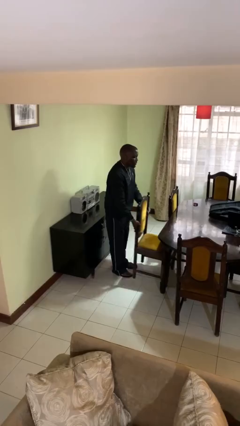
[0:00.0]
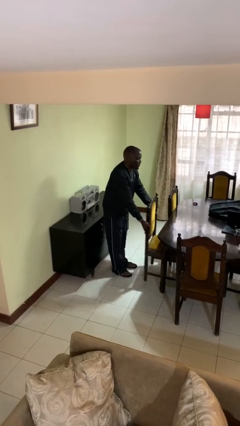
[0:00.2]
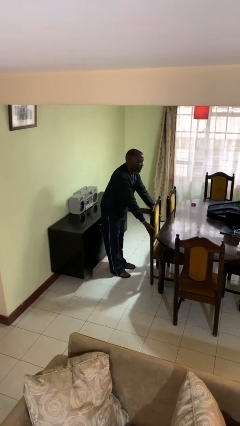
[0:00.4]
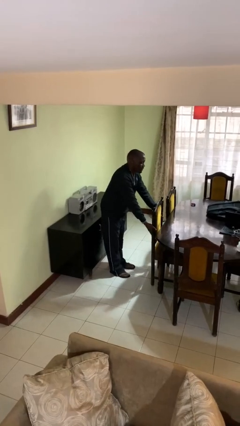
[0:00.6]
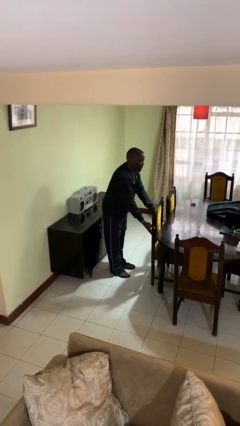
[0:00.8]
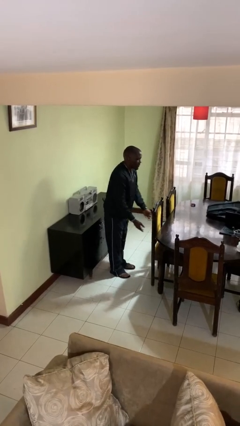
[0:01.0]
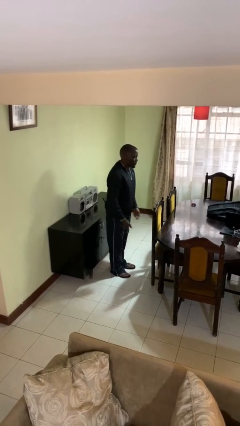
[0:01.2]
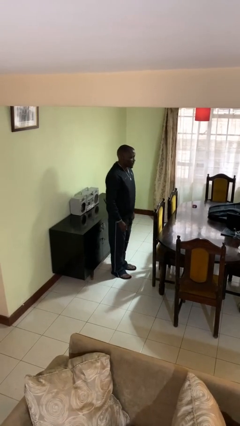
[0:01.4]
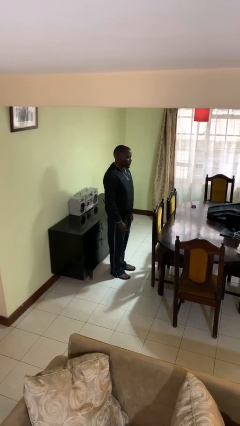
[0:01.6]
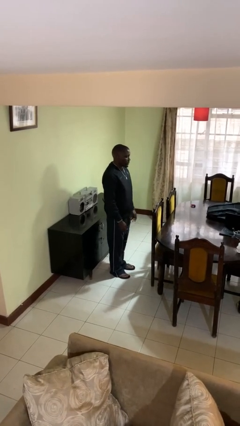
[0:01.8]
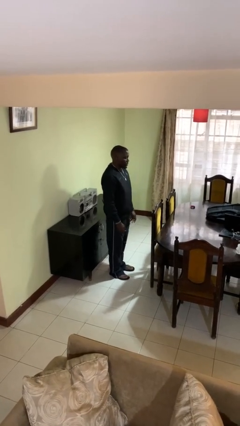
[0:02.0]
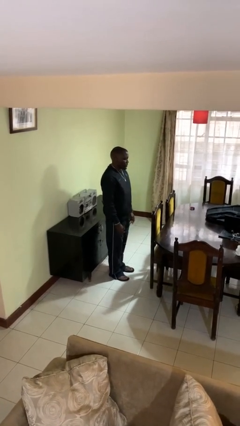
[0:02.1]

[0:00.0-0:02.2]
person pushes in chair

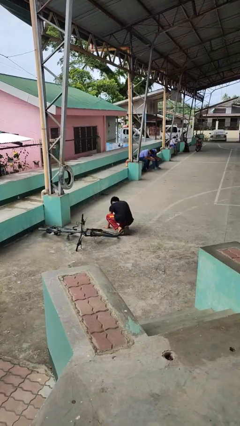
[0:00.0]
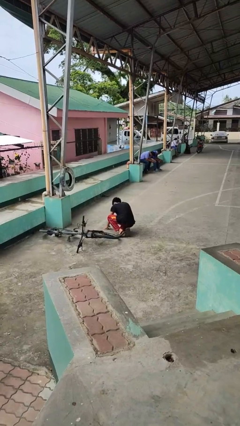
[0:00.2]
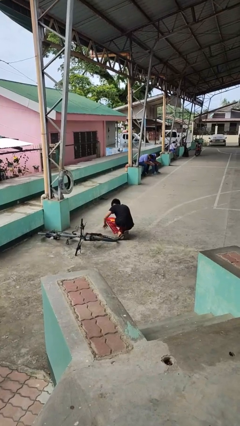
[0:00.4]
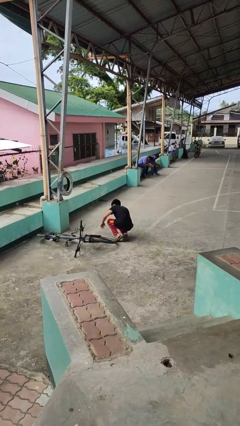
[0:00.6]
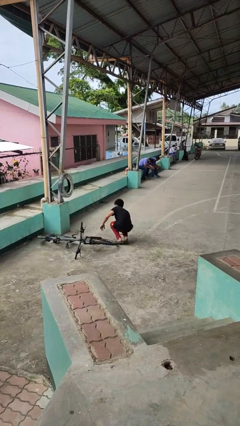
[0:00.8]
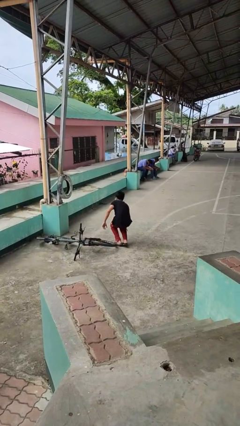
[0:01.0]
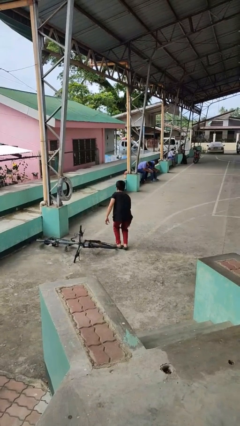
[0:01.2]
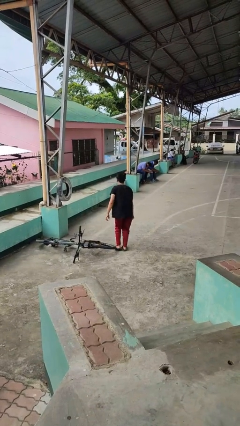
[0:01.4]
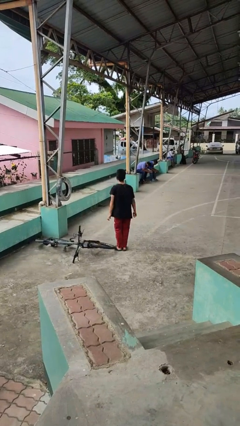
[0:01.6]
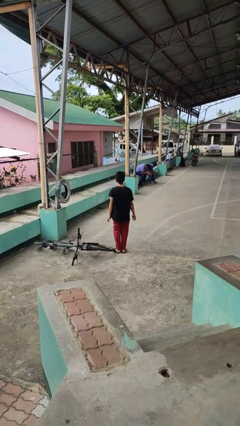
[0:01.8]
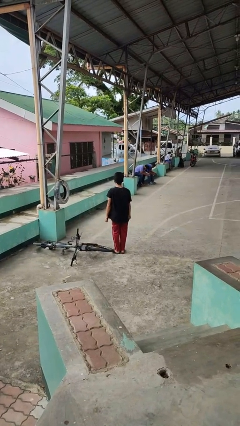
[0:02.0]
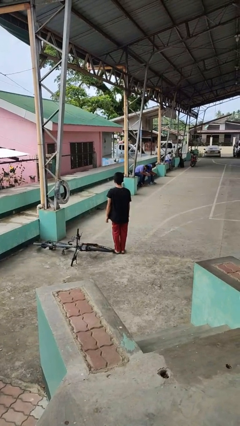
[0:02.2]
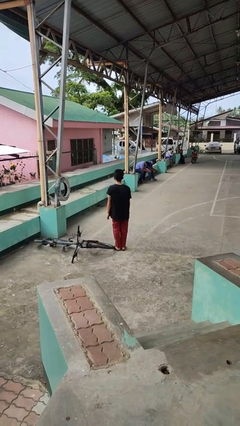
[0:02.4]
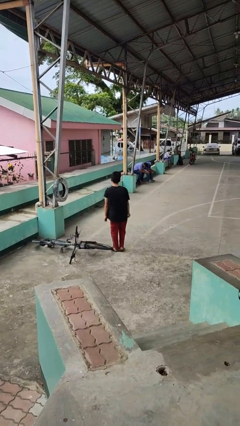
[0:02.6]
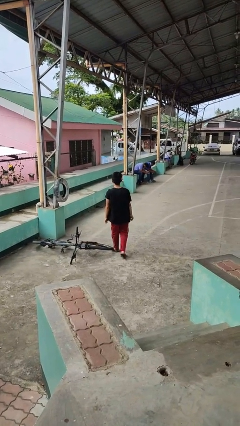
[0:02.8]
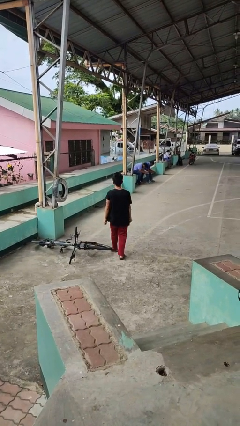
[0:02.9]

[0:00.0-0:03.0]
person stands up from floor

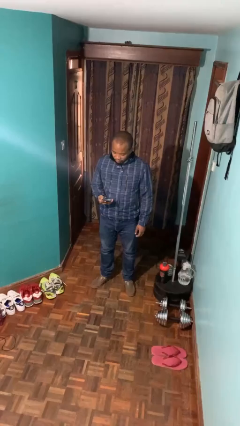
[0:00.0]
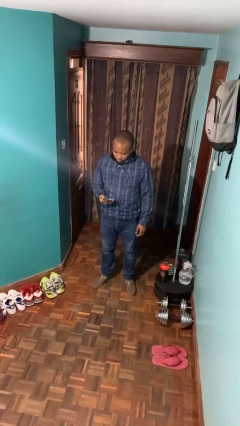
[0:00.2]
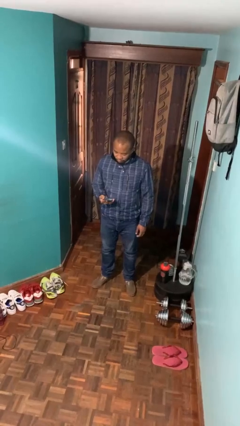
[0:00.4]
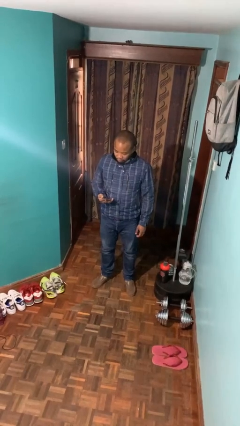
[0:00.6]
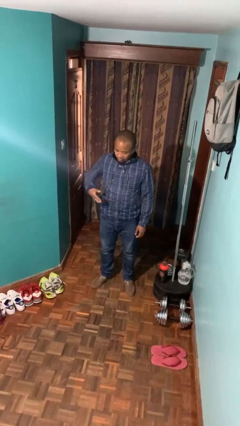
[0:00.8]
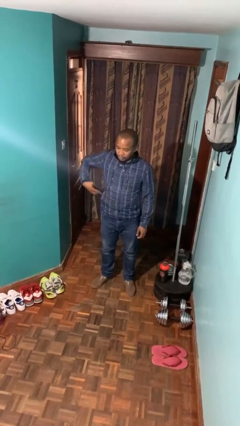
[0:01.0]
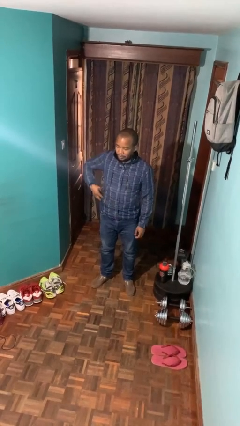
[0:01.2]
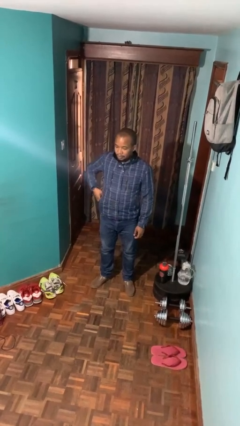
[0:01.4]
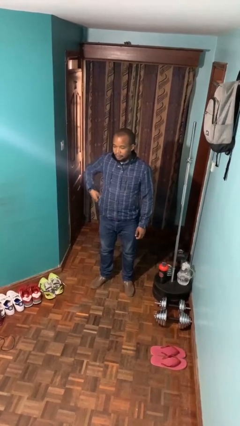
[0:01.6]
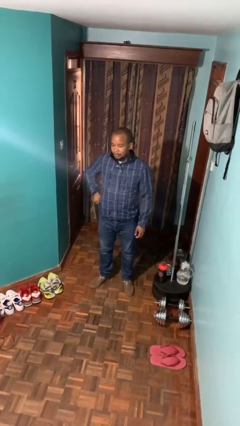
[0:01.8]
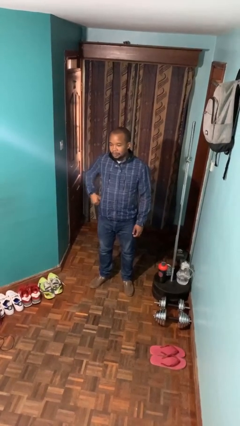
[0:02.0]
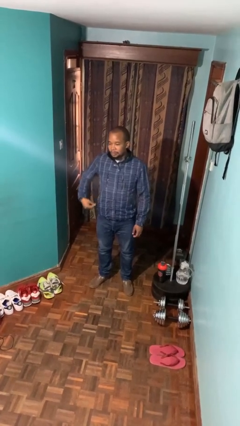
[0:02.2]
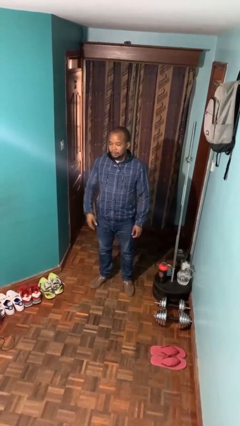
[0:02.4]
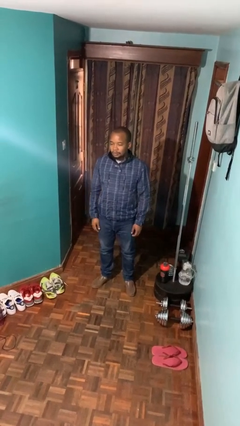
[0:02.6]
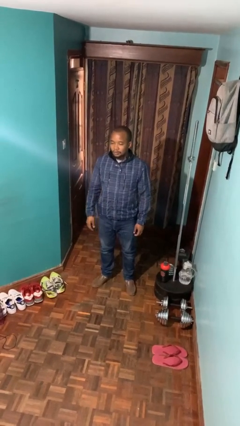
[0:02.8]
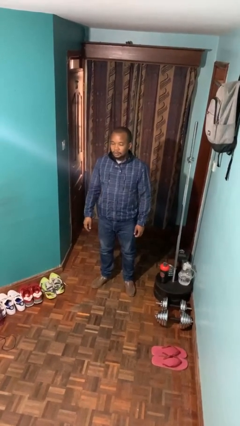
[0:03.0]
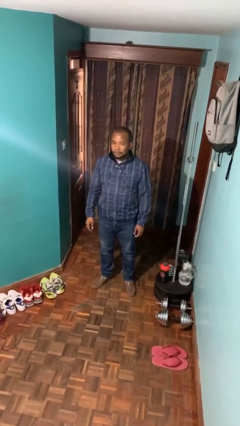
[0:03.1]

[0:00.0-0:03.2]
person puts phone into pocket

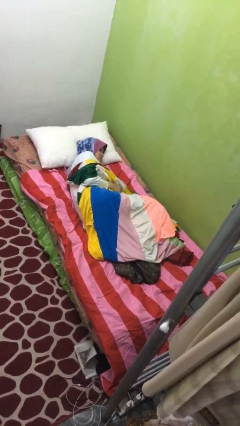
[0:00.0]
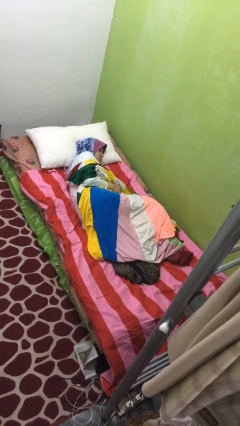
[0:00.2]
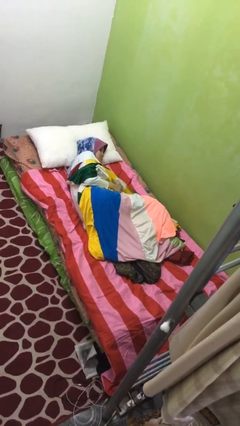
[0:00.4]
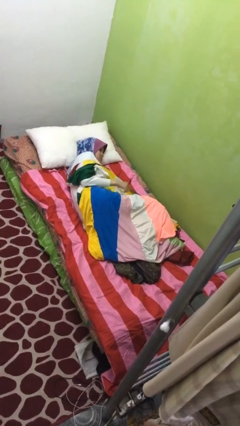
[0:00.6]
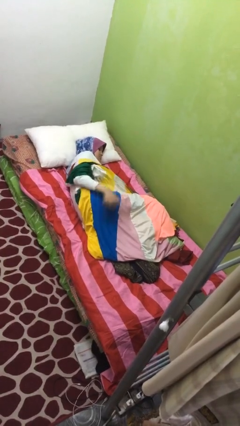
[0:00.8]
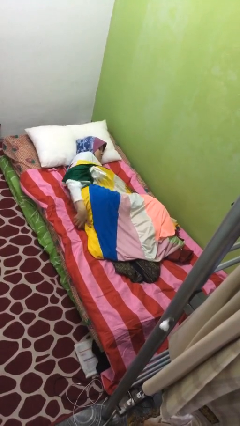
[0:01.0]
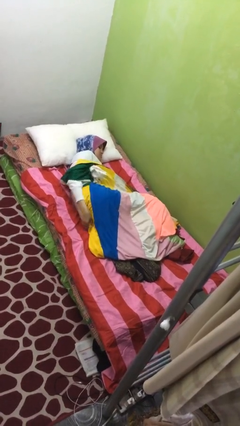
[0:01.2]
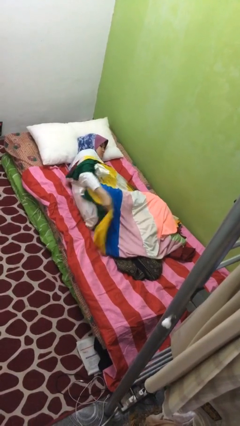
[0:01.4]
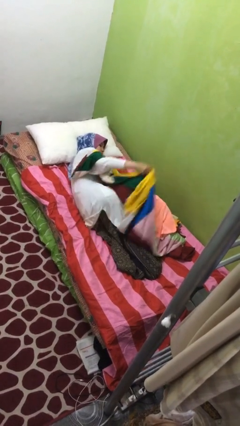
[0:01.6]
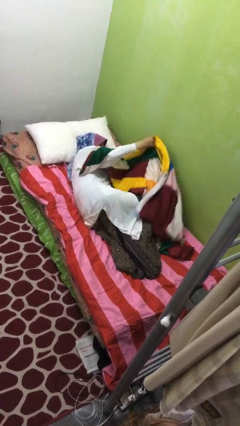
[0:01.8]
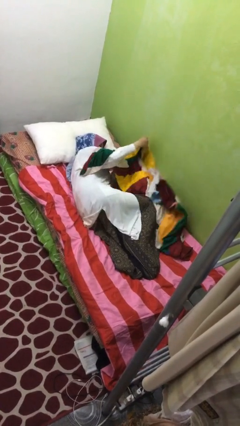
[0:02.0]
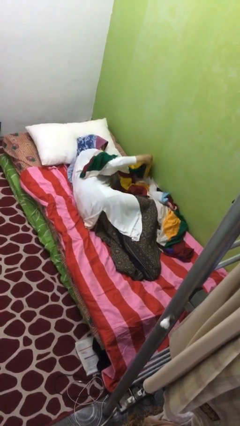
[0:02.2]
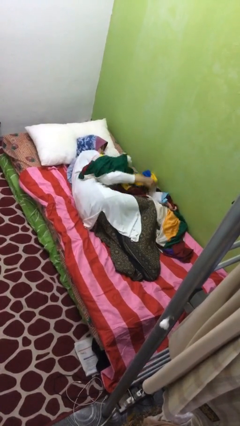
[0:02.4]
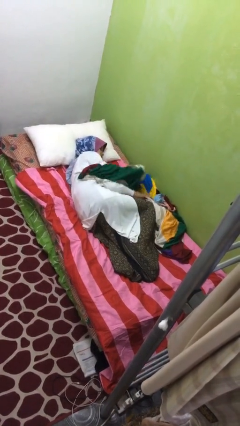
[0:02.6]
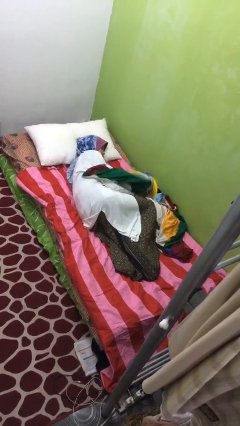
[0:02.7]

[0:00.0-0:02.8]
person uncovers with blanket

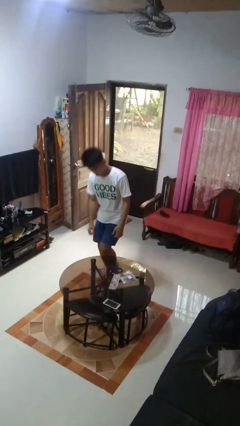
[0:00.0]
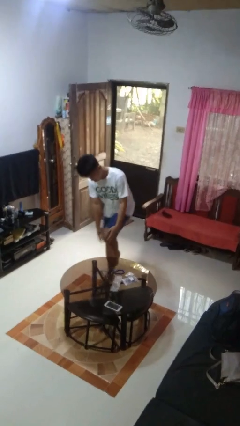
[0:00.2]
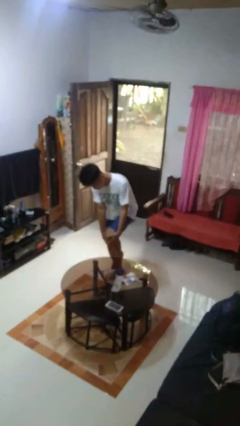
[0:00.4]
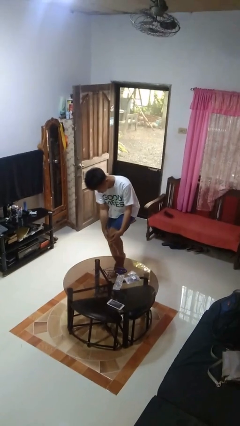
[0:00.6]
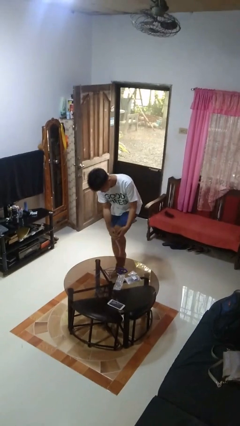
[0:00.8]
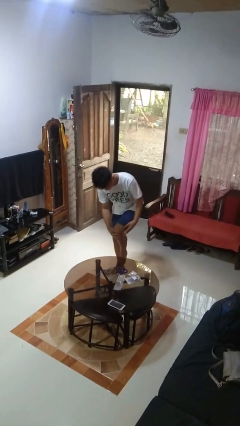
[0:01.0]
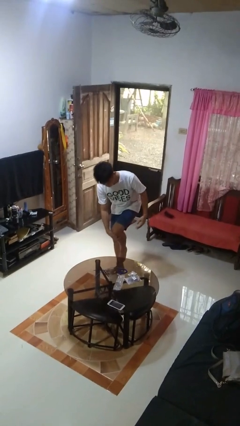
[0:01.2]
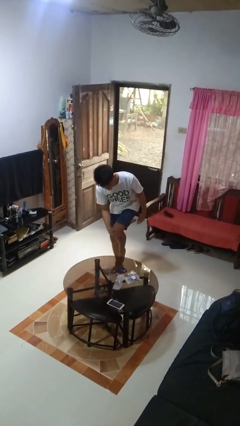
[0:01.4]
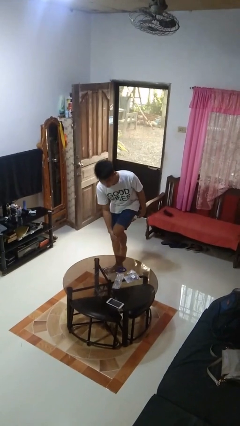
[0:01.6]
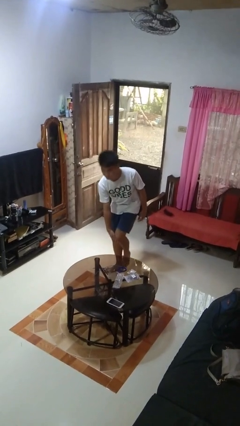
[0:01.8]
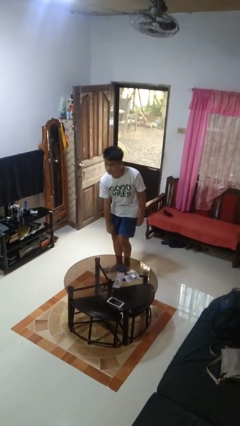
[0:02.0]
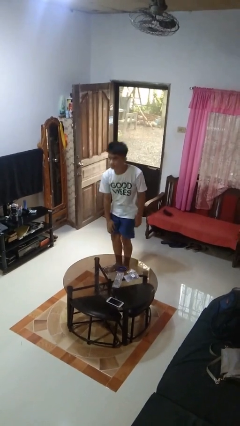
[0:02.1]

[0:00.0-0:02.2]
person bumps into table

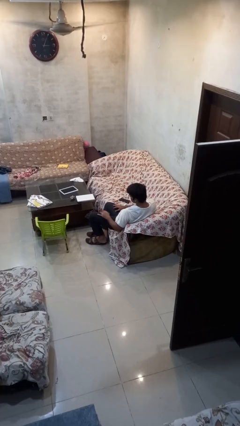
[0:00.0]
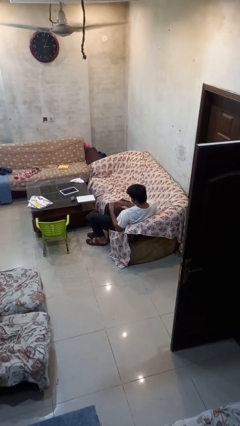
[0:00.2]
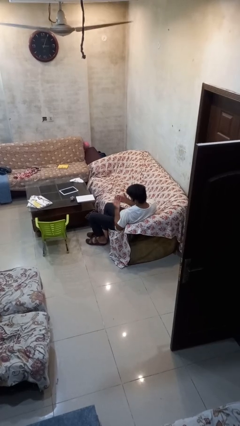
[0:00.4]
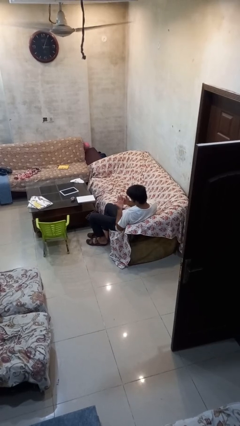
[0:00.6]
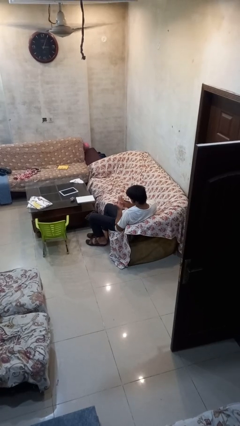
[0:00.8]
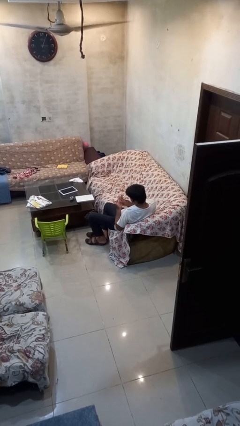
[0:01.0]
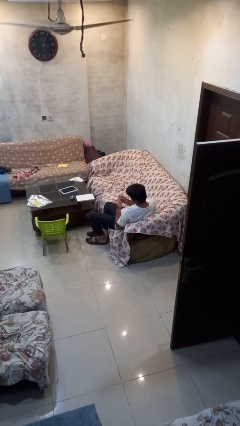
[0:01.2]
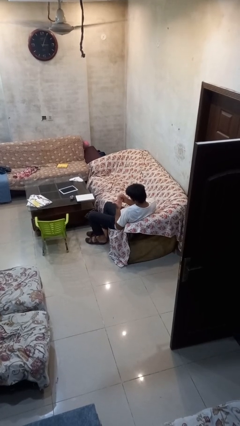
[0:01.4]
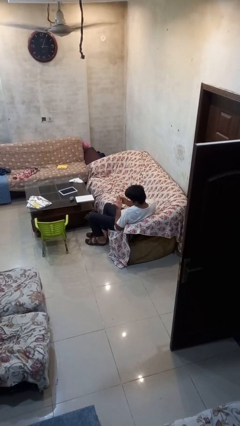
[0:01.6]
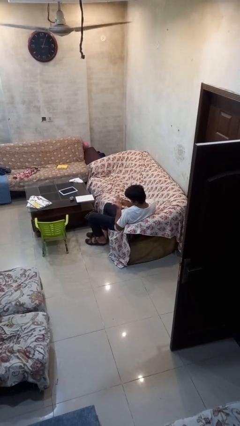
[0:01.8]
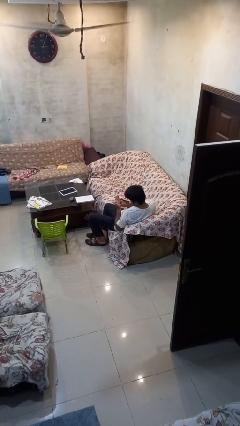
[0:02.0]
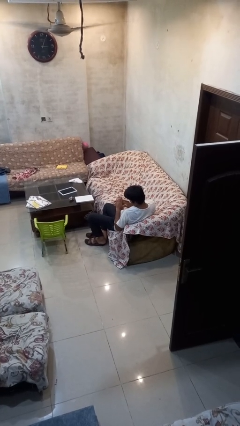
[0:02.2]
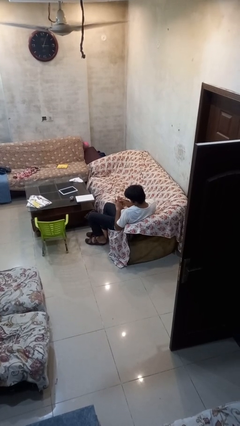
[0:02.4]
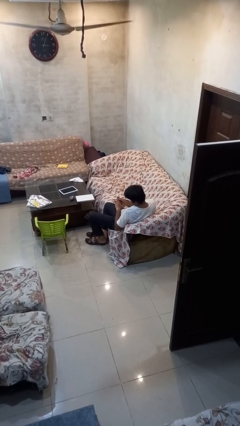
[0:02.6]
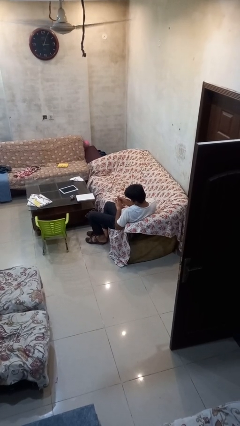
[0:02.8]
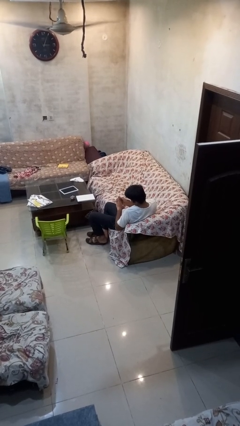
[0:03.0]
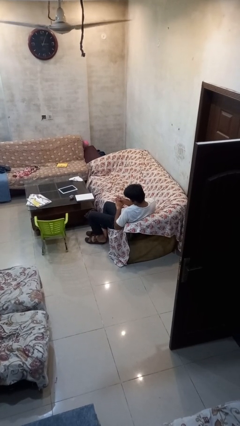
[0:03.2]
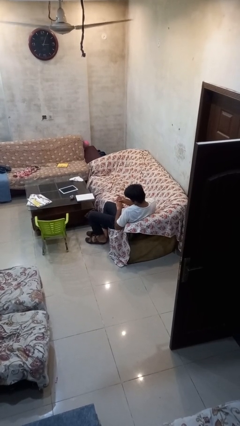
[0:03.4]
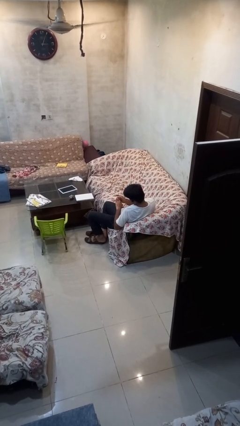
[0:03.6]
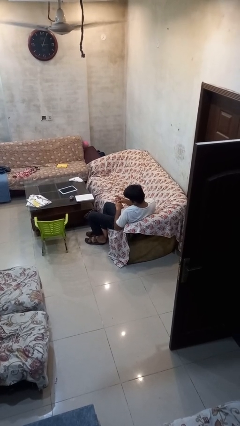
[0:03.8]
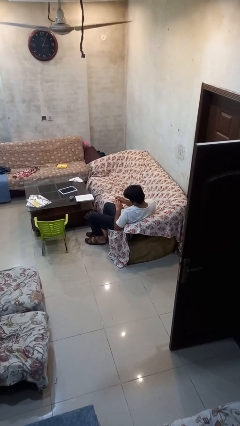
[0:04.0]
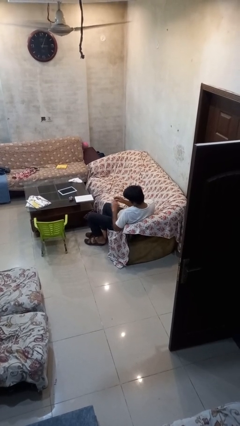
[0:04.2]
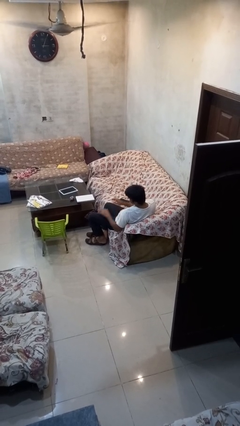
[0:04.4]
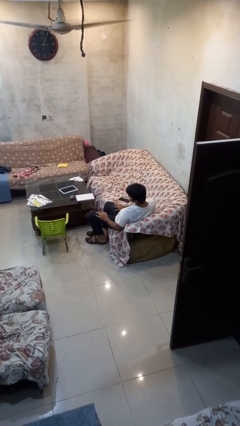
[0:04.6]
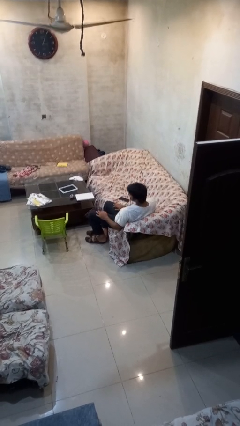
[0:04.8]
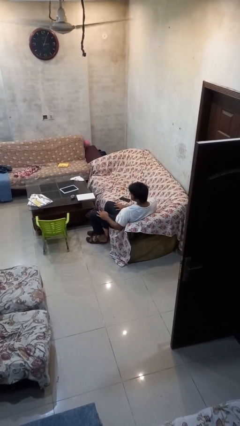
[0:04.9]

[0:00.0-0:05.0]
person looks at hands in lap
